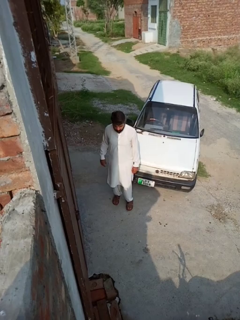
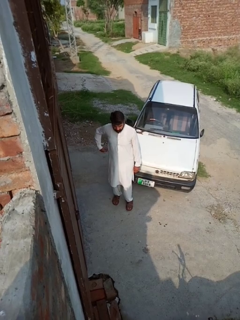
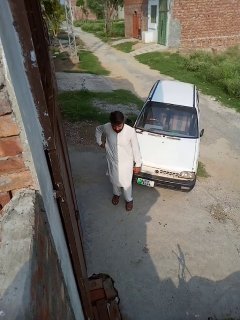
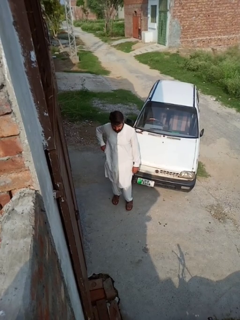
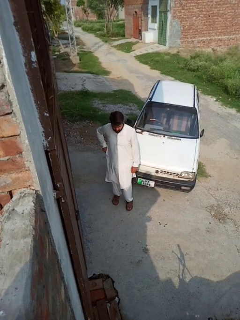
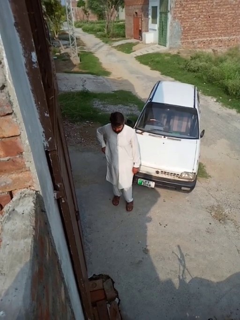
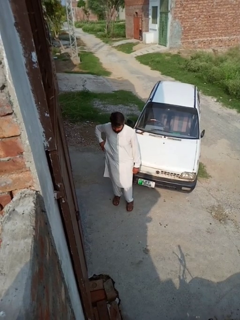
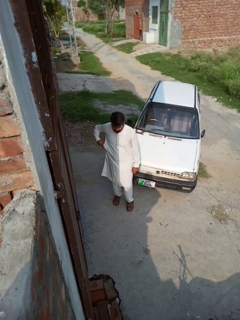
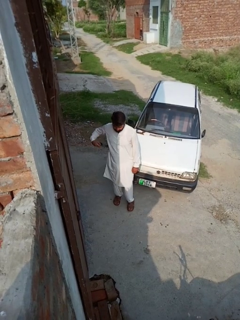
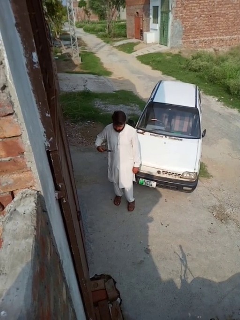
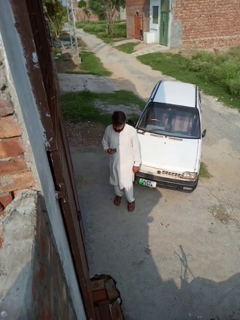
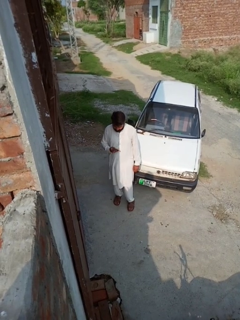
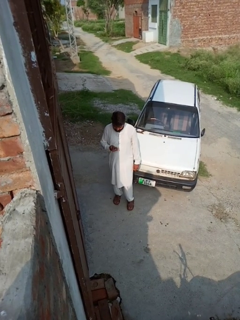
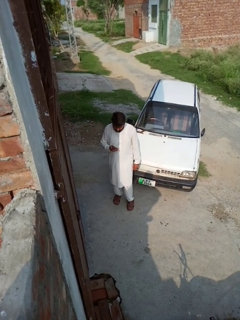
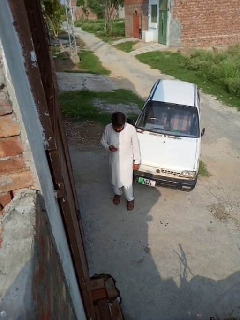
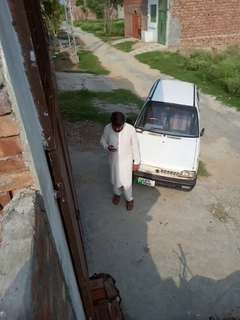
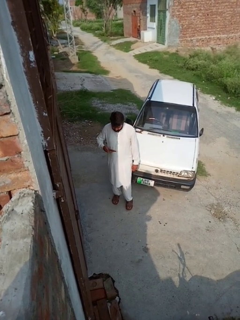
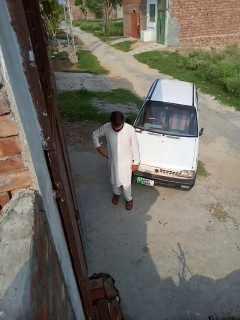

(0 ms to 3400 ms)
person takes phone from pocket

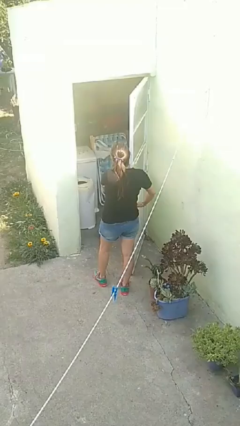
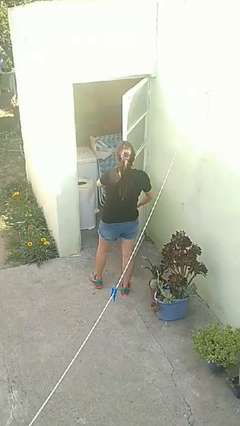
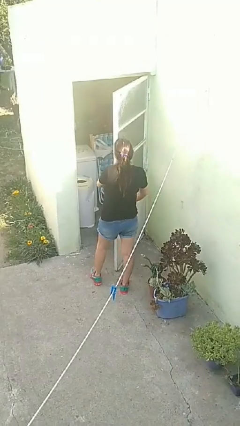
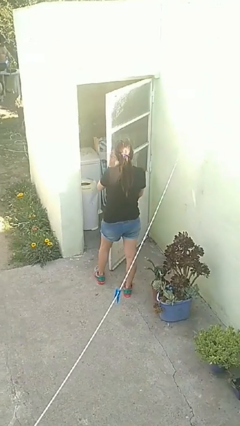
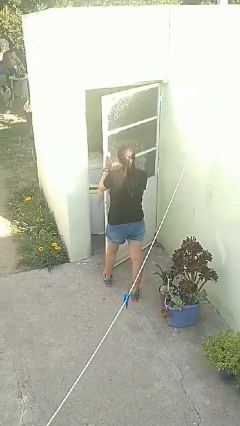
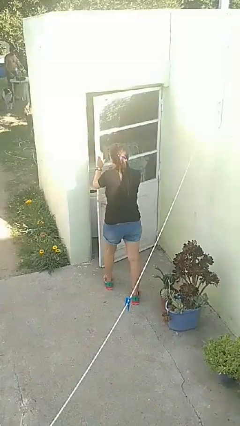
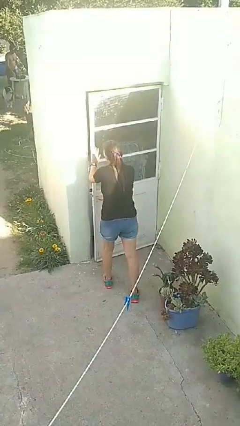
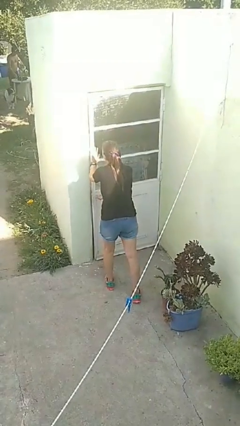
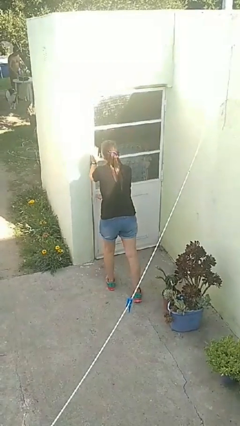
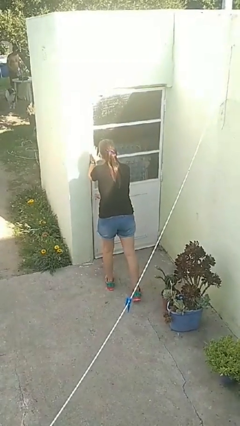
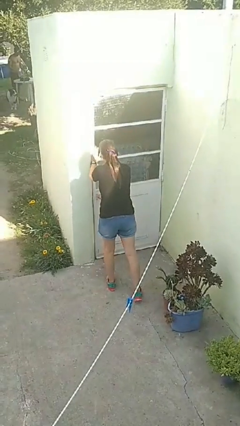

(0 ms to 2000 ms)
person closes facility door

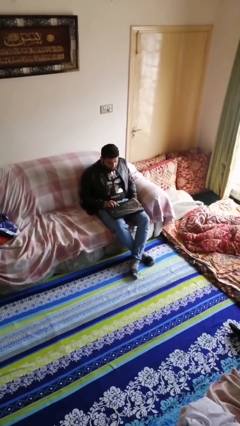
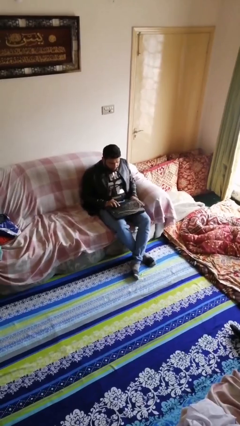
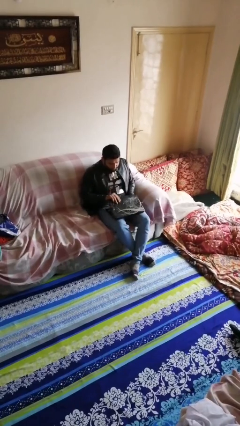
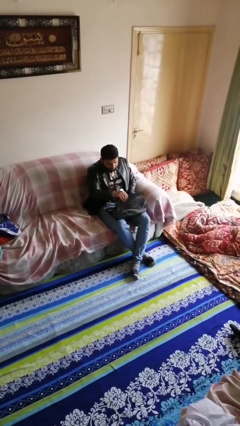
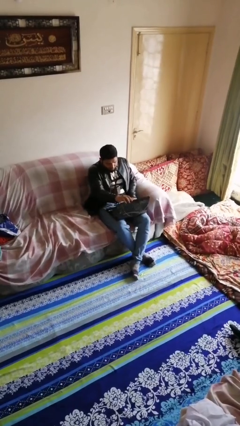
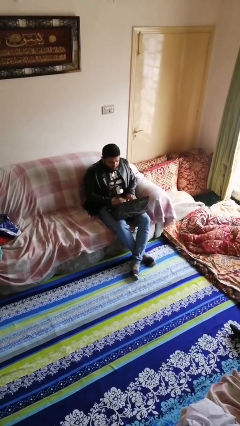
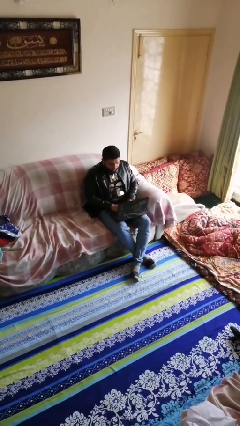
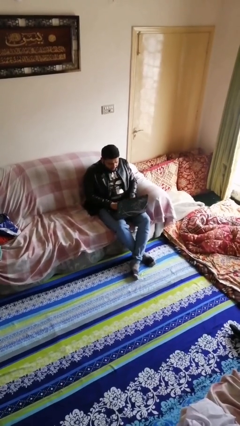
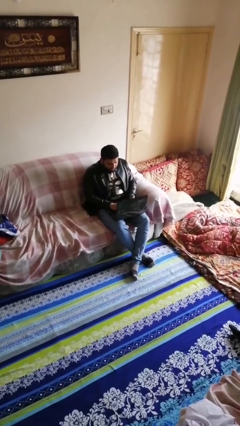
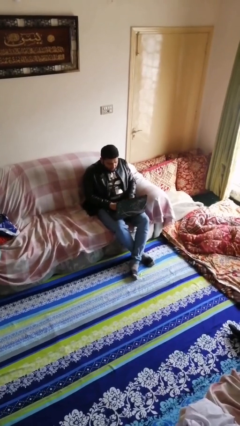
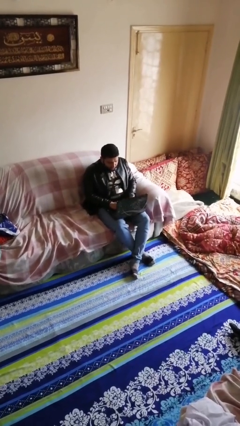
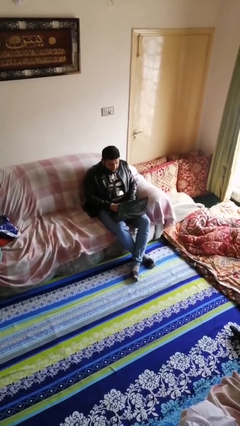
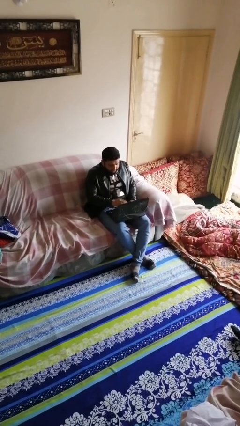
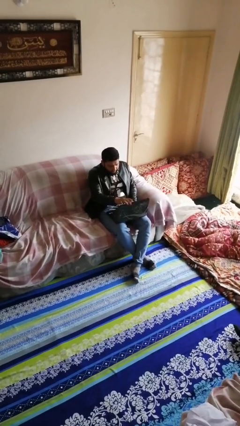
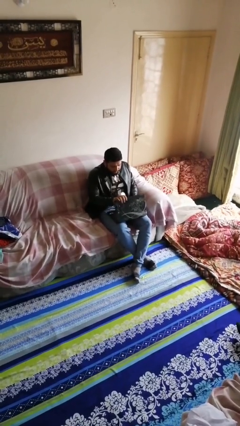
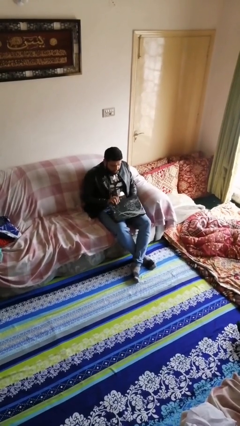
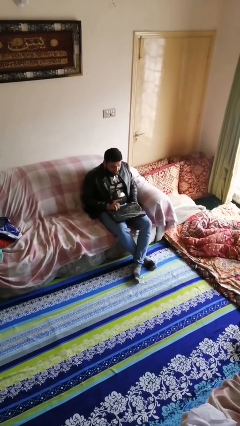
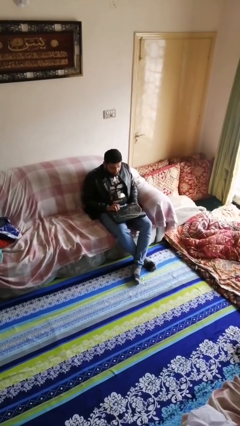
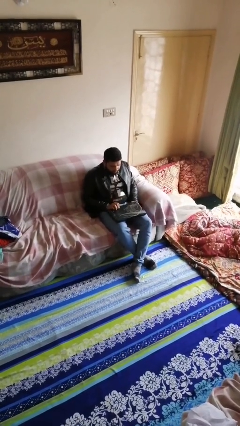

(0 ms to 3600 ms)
person interacts with laptop

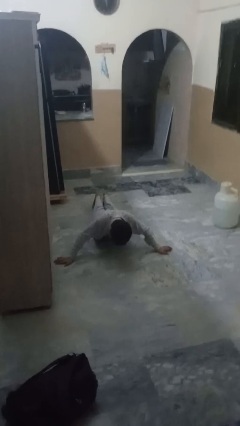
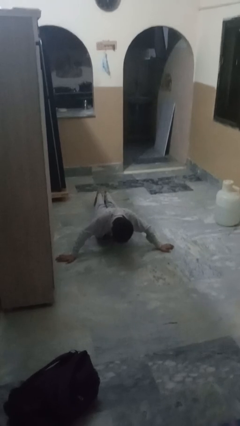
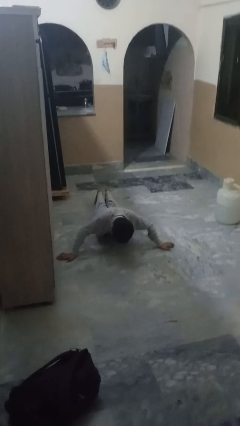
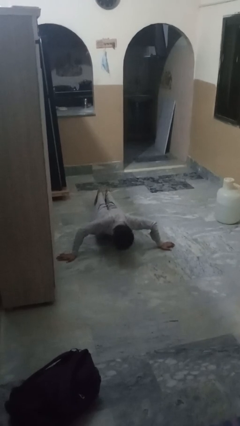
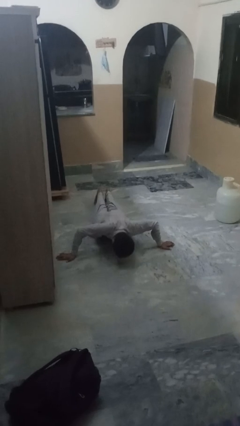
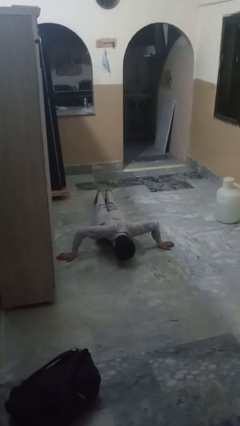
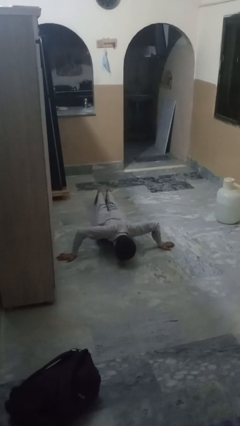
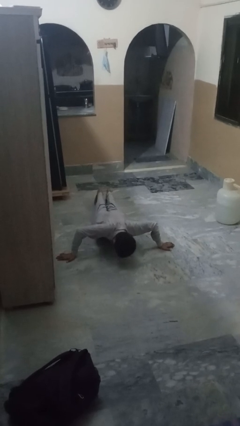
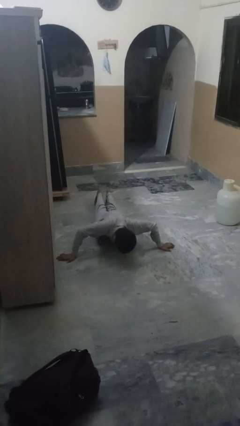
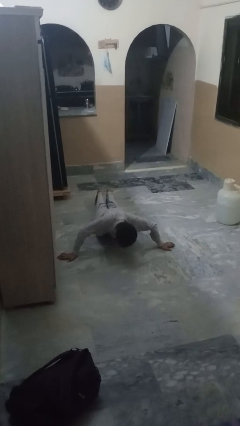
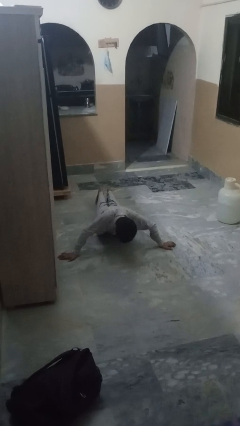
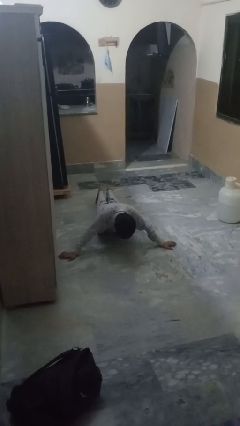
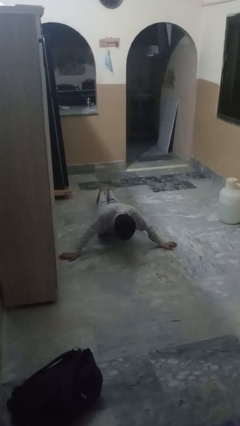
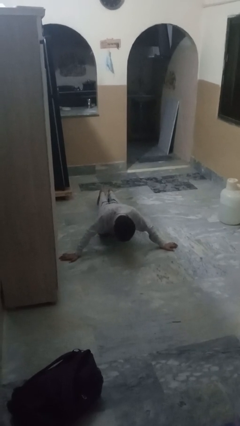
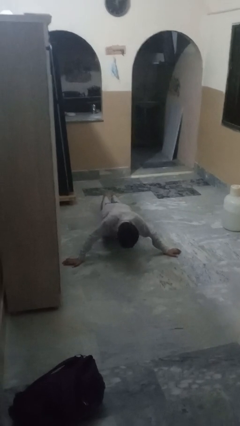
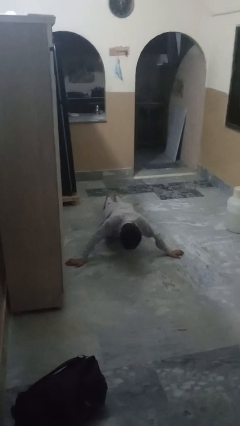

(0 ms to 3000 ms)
person exercises with pushup

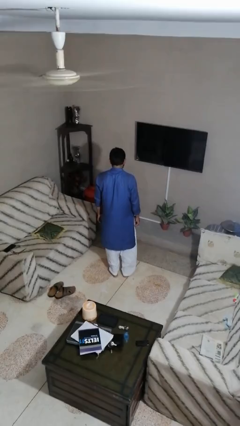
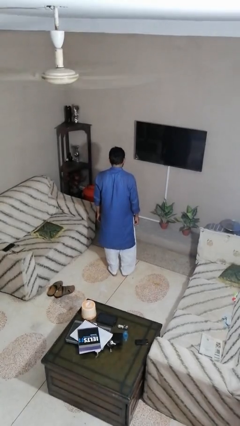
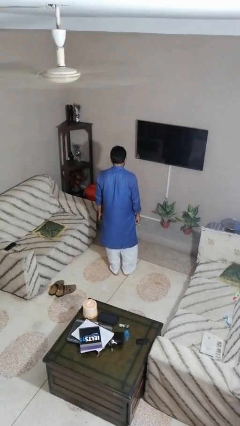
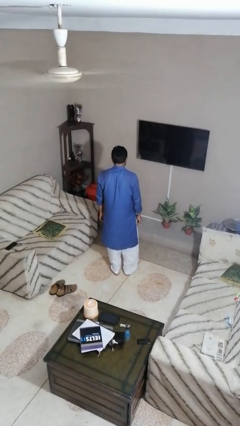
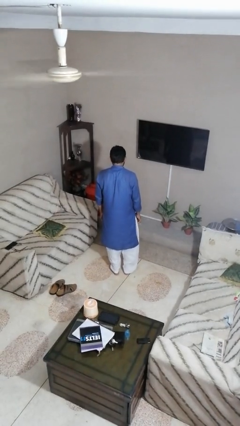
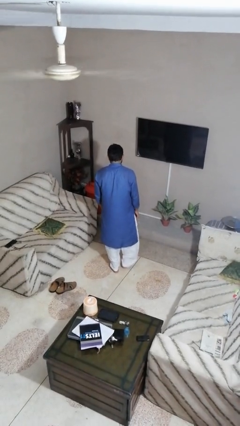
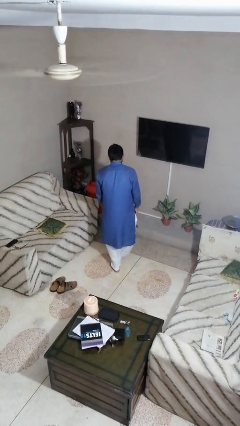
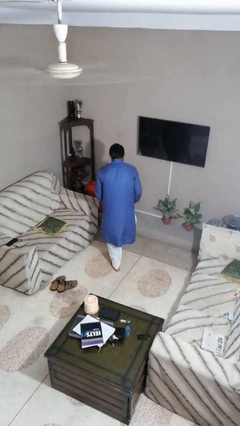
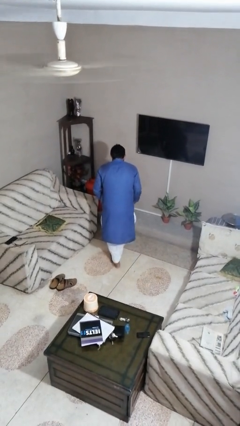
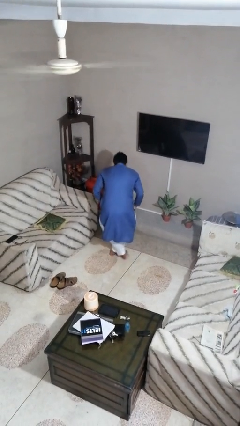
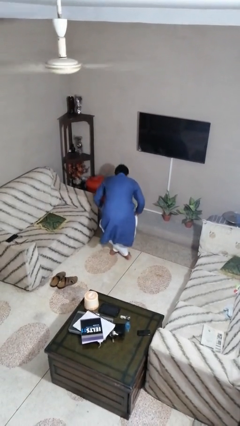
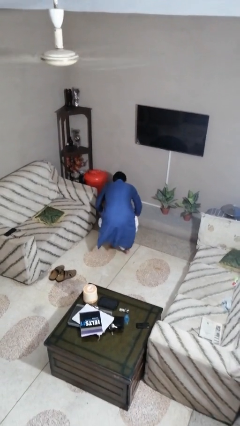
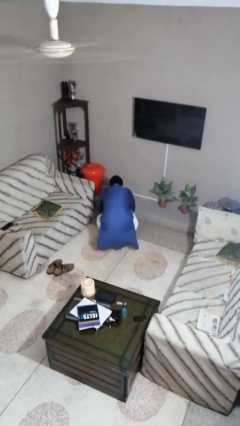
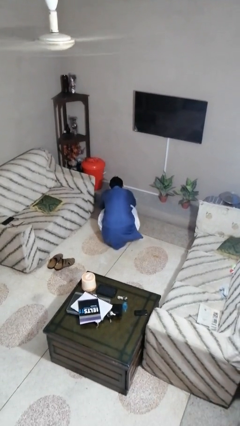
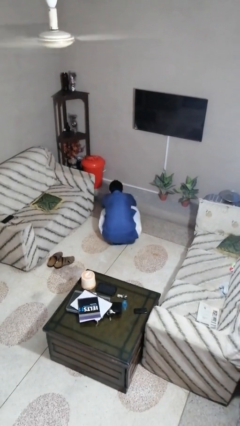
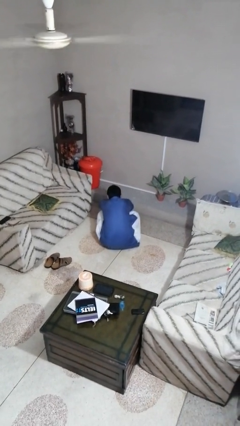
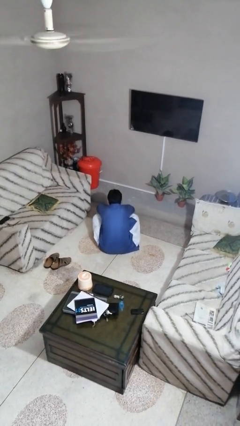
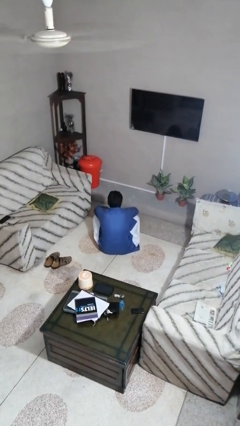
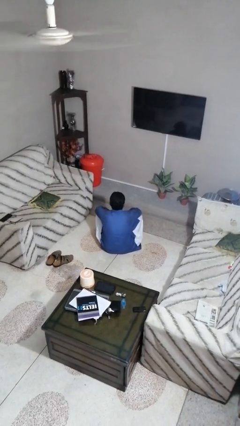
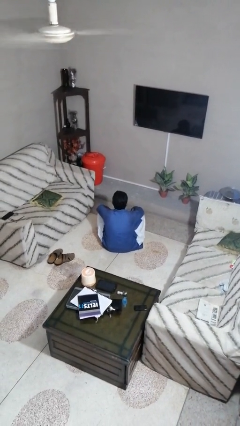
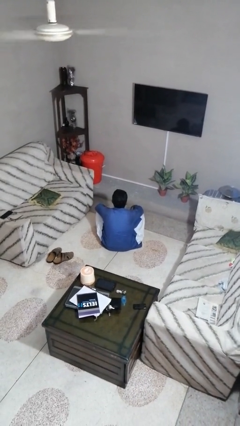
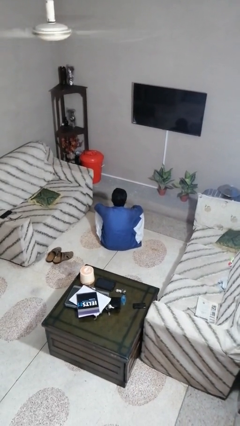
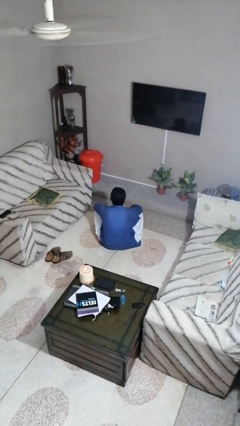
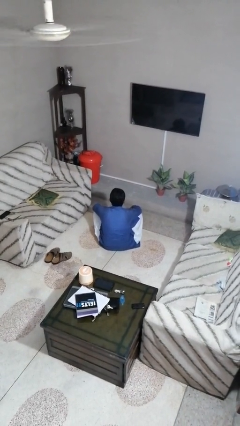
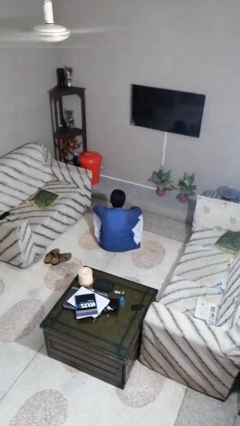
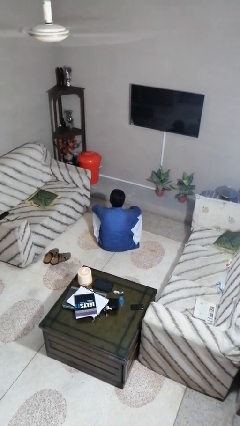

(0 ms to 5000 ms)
person sits crisscross

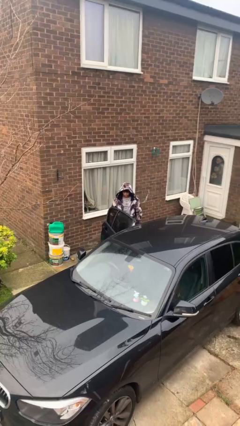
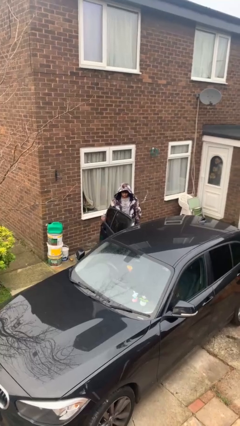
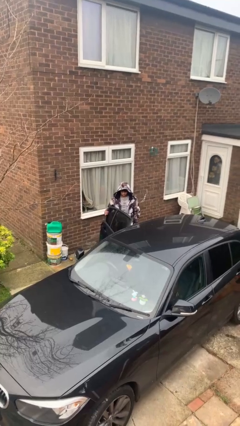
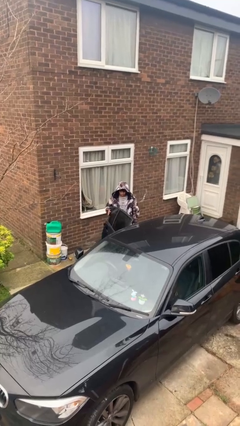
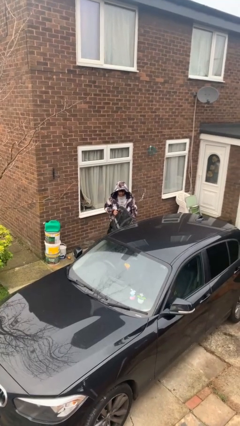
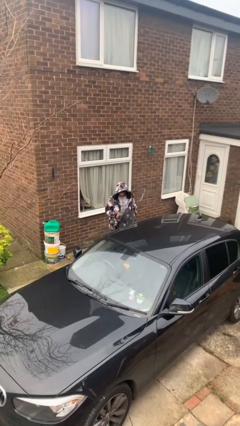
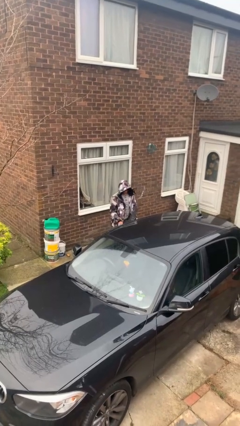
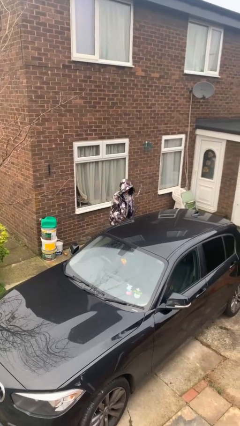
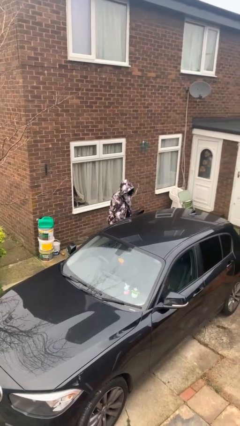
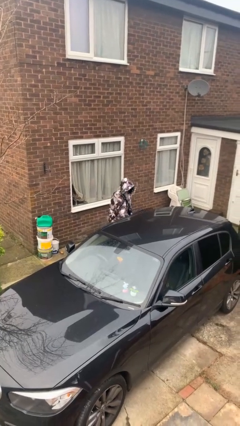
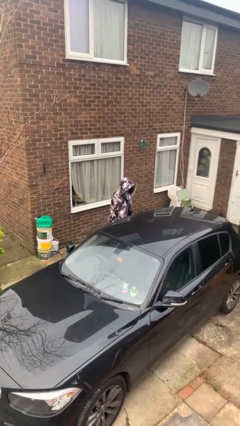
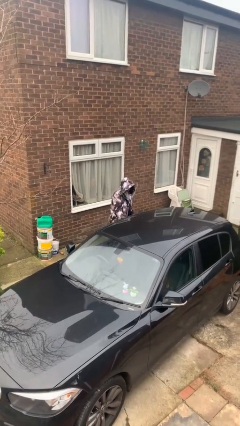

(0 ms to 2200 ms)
person closes car door
